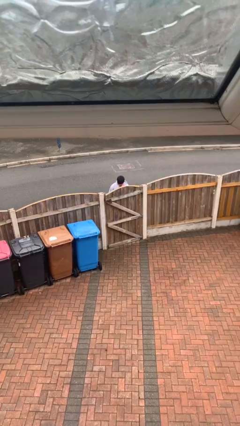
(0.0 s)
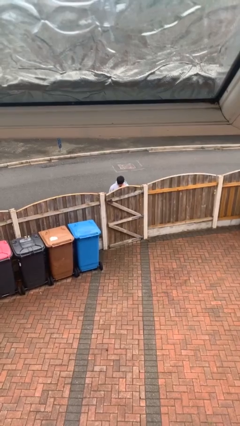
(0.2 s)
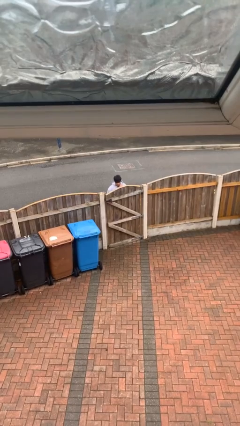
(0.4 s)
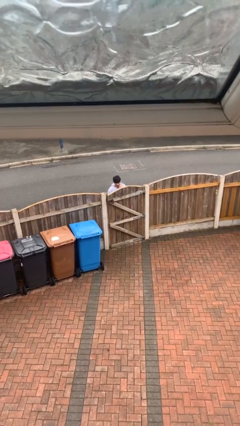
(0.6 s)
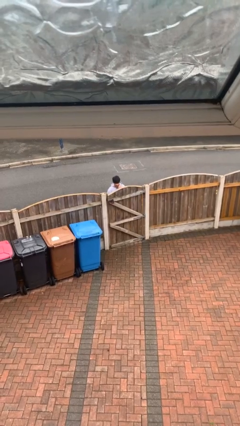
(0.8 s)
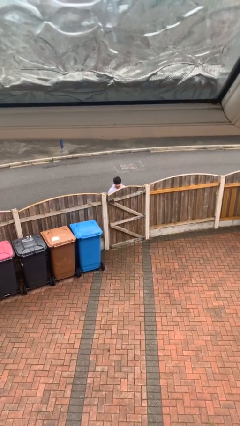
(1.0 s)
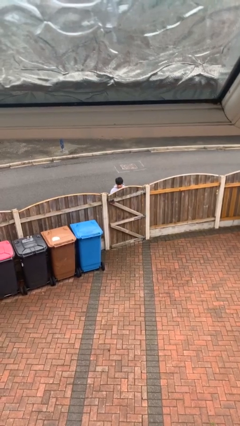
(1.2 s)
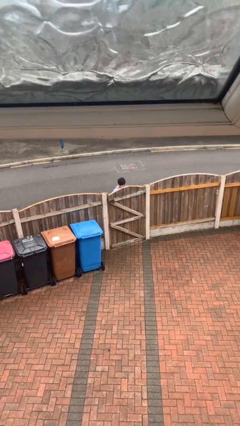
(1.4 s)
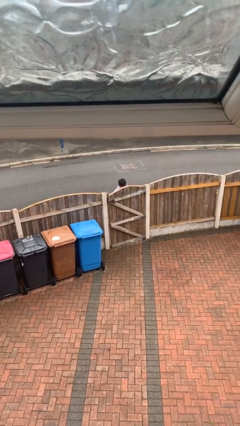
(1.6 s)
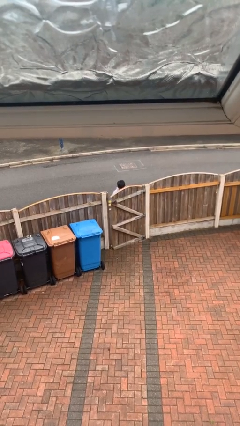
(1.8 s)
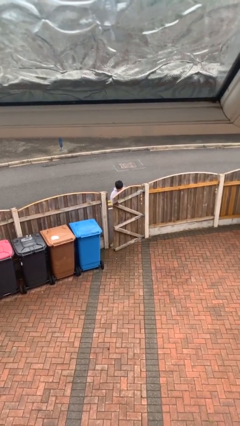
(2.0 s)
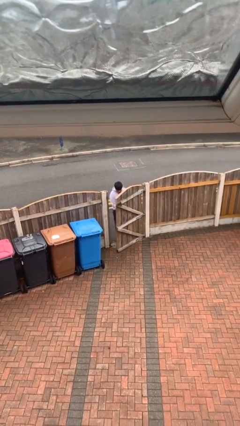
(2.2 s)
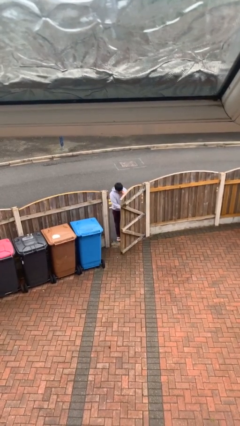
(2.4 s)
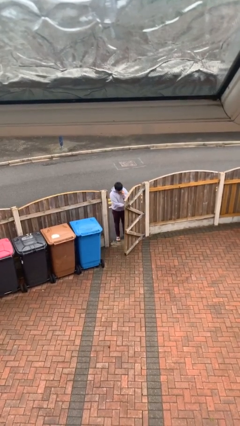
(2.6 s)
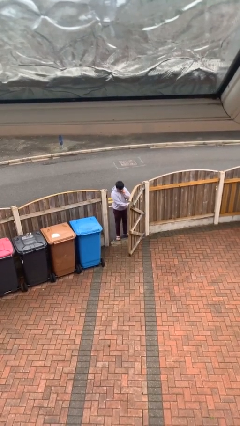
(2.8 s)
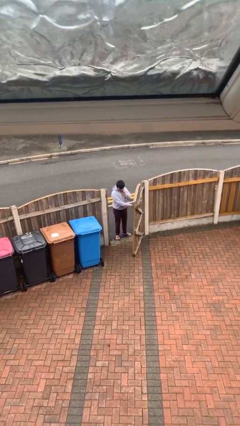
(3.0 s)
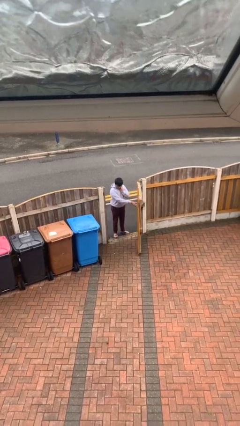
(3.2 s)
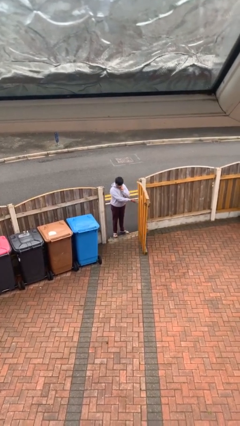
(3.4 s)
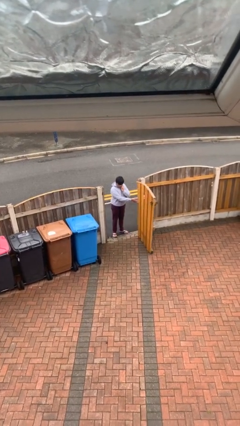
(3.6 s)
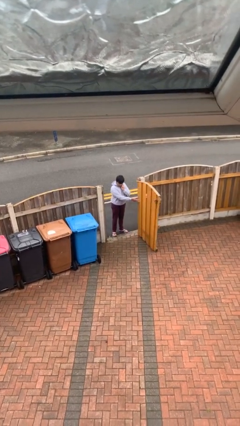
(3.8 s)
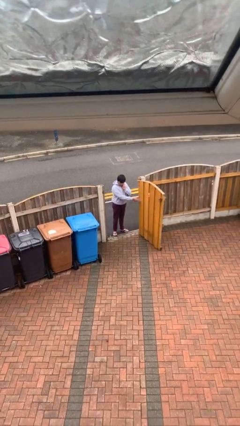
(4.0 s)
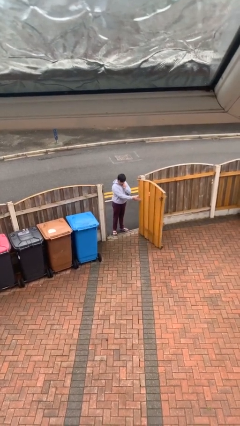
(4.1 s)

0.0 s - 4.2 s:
person opens facility door

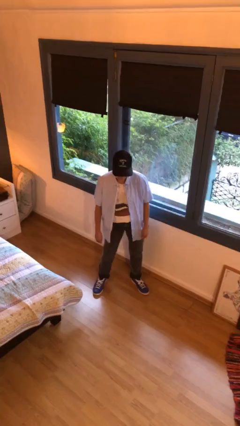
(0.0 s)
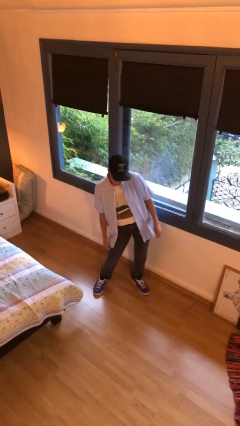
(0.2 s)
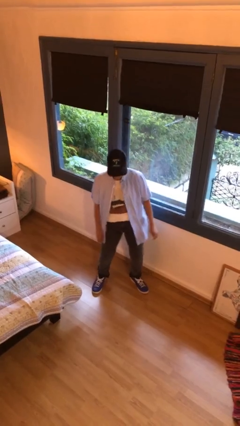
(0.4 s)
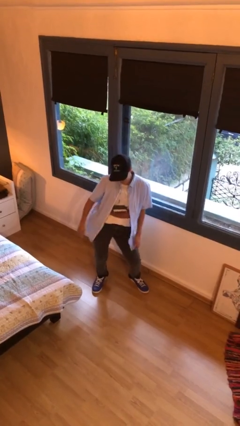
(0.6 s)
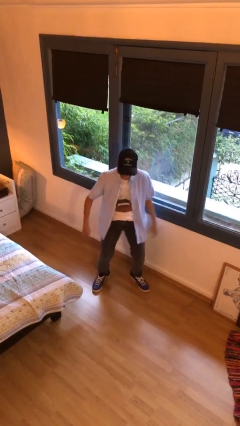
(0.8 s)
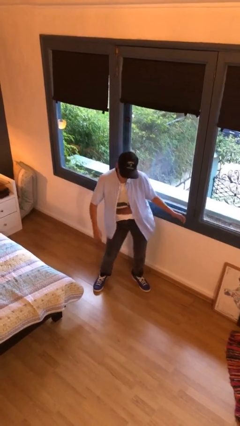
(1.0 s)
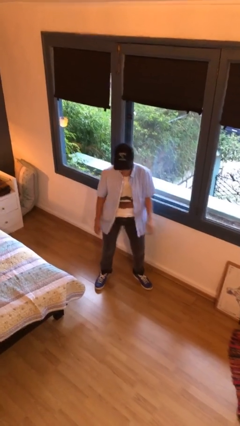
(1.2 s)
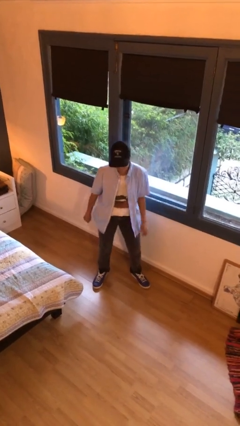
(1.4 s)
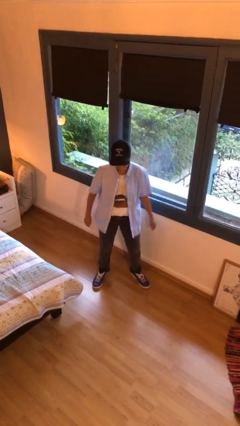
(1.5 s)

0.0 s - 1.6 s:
person wiggles hips

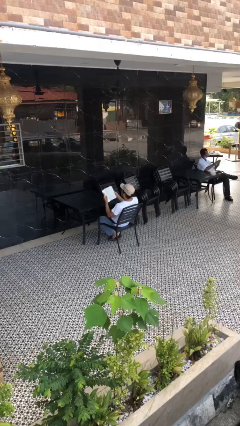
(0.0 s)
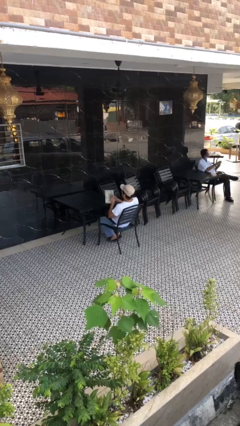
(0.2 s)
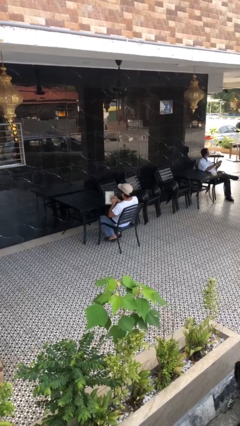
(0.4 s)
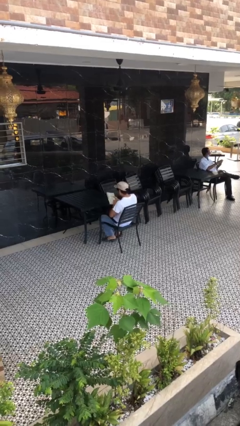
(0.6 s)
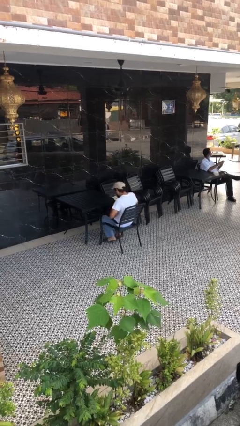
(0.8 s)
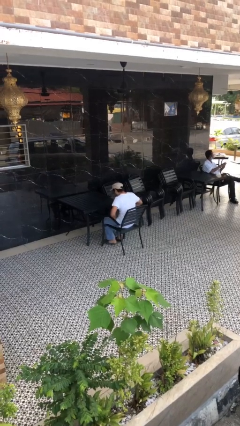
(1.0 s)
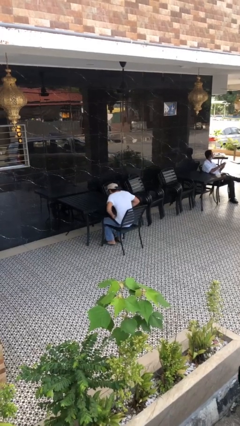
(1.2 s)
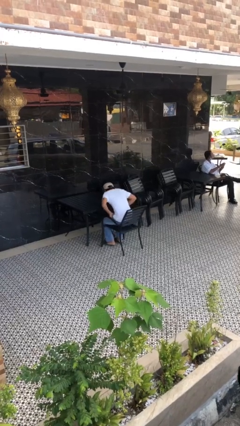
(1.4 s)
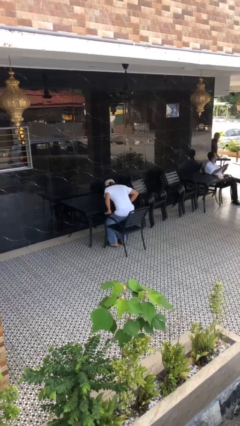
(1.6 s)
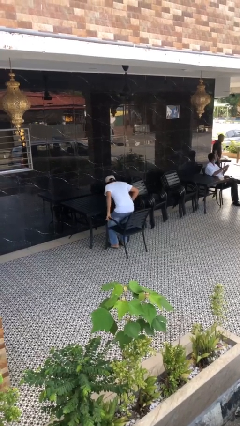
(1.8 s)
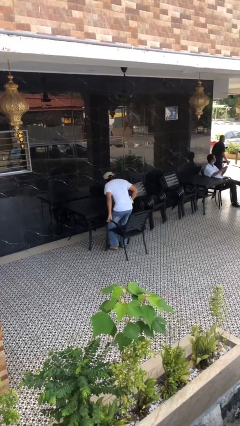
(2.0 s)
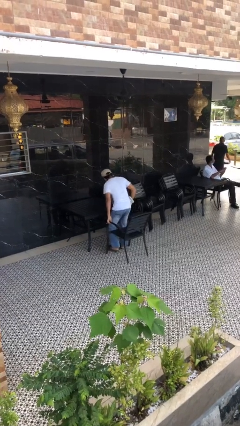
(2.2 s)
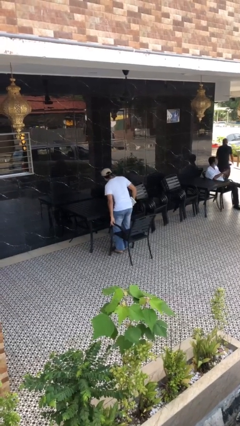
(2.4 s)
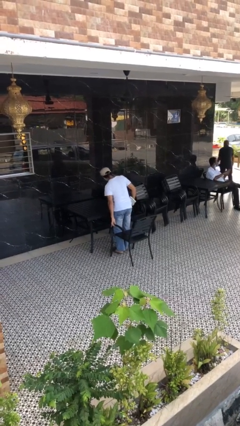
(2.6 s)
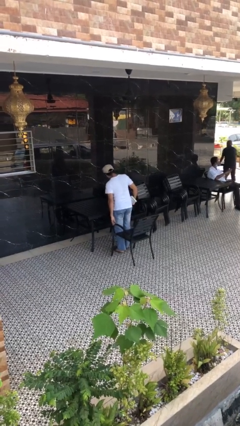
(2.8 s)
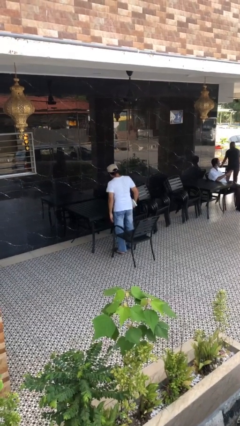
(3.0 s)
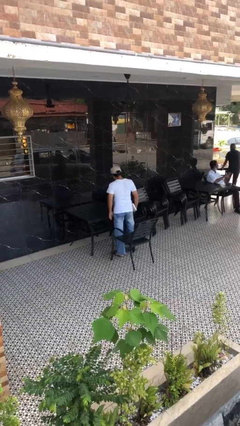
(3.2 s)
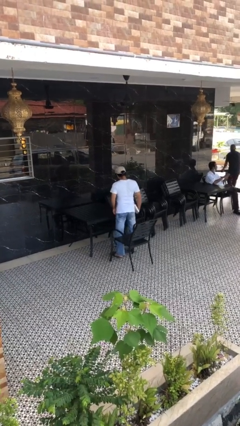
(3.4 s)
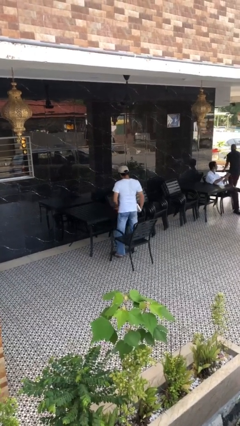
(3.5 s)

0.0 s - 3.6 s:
person stands up

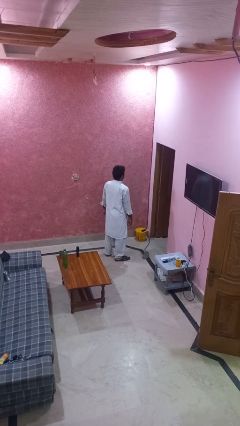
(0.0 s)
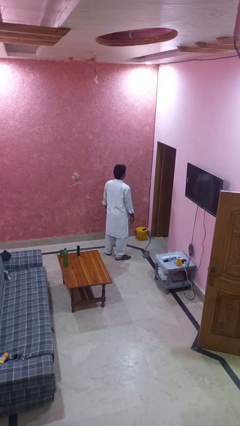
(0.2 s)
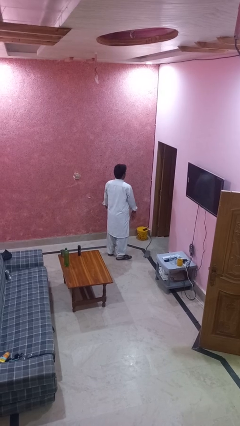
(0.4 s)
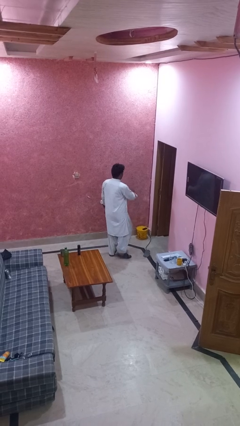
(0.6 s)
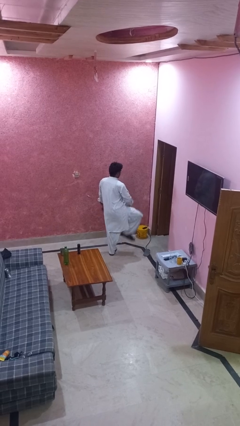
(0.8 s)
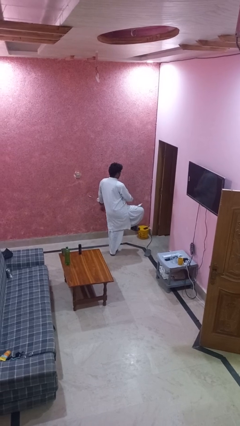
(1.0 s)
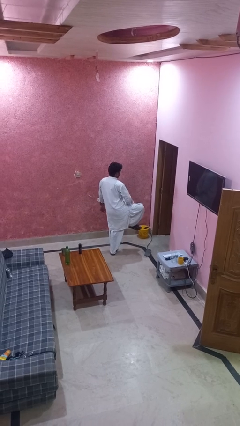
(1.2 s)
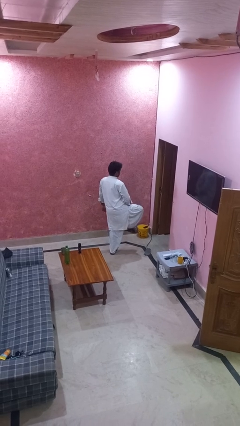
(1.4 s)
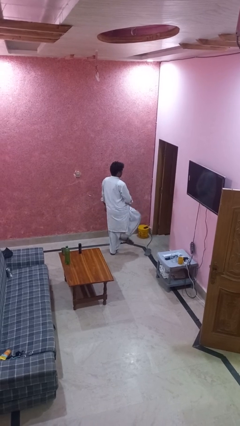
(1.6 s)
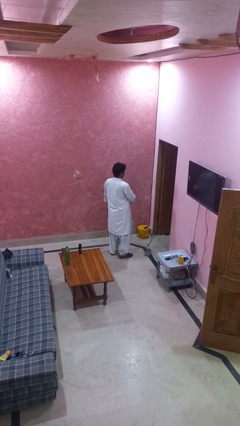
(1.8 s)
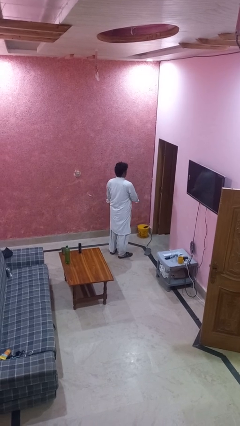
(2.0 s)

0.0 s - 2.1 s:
person slaps hands on thighs

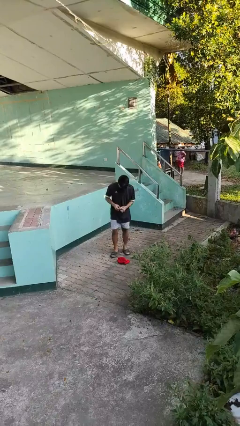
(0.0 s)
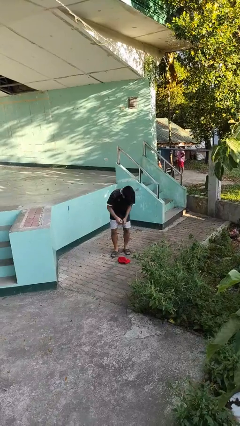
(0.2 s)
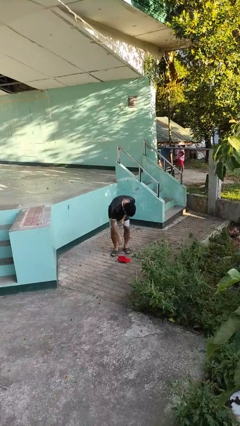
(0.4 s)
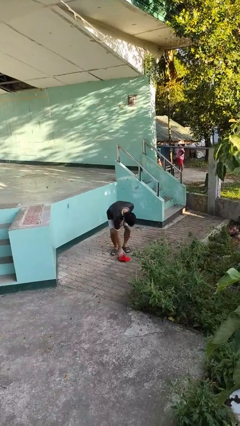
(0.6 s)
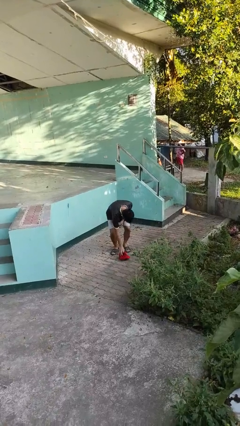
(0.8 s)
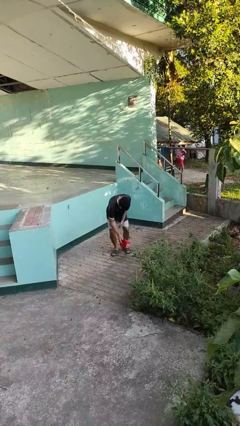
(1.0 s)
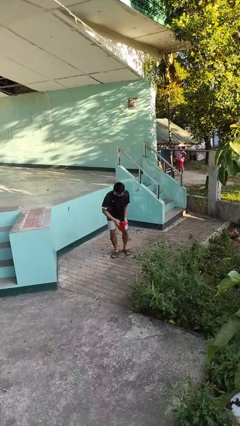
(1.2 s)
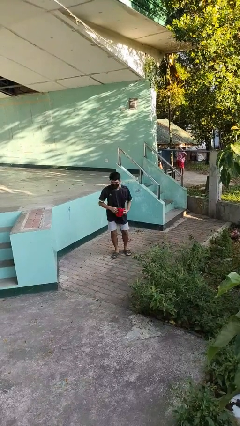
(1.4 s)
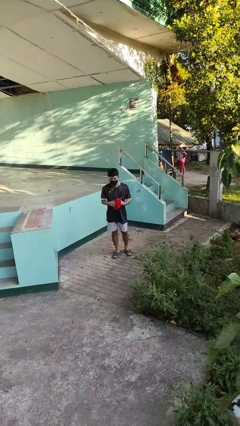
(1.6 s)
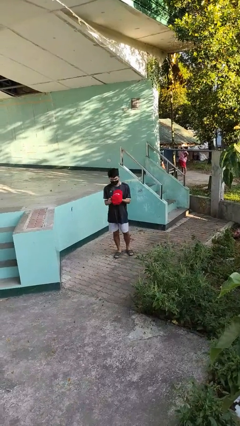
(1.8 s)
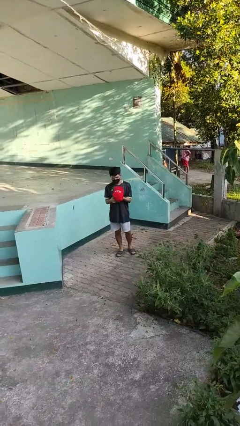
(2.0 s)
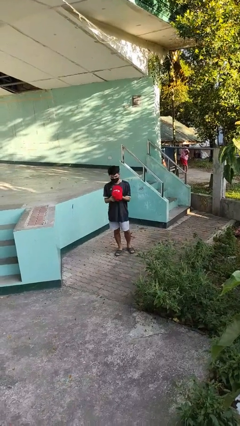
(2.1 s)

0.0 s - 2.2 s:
person picks up object from floor

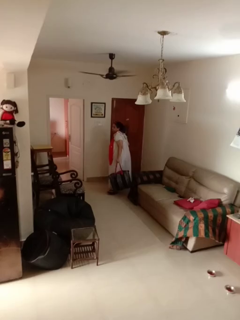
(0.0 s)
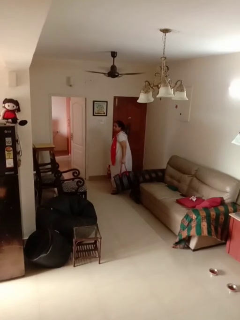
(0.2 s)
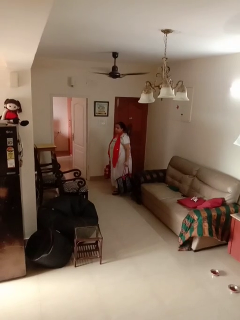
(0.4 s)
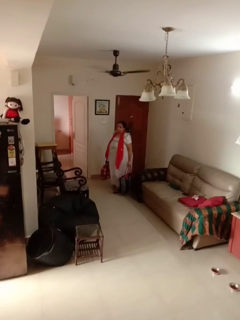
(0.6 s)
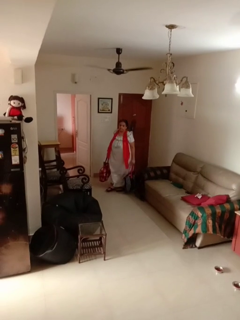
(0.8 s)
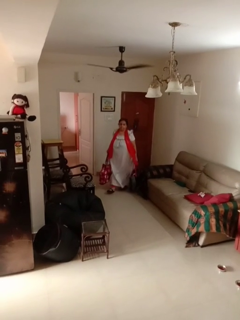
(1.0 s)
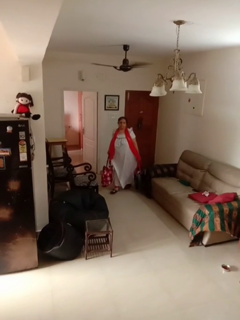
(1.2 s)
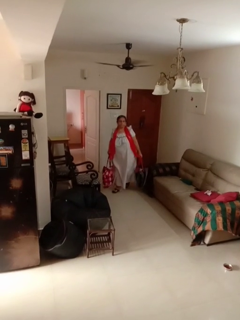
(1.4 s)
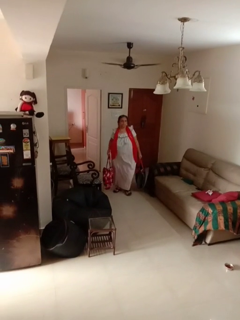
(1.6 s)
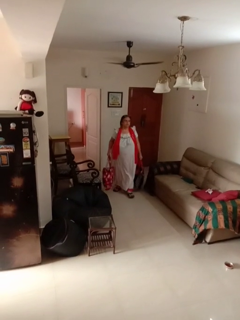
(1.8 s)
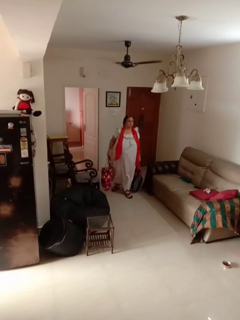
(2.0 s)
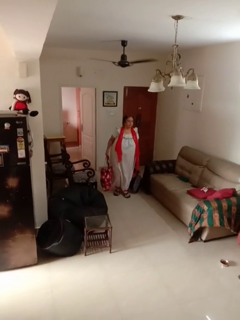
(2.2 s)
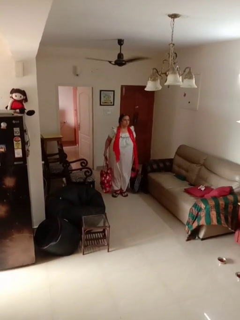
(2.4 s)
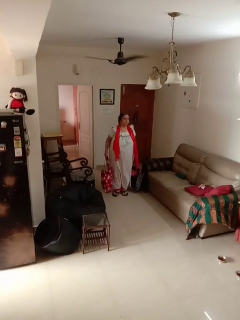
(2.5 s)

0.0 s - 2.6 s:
person carries groceries

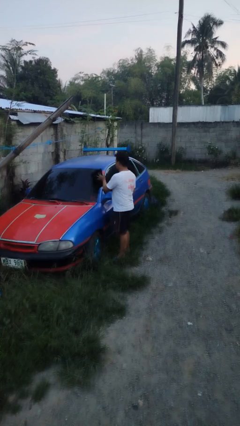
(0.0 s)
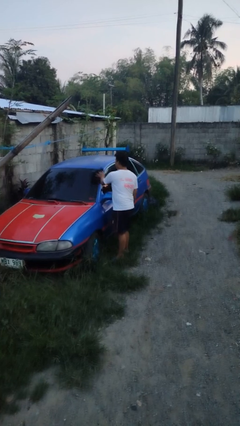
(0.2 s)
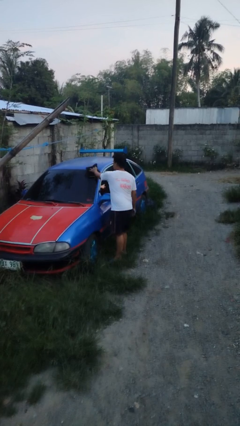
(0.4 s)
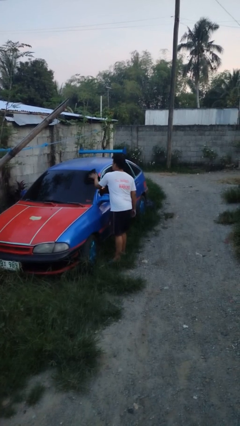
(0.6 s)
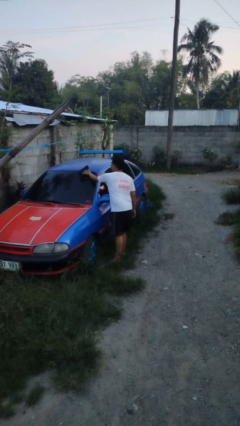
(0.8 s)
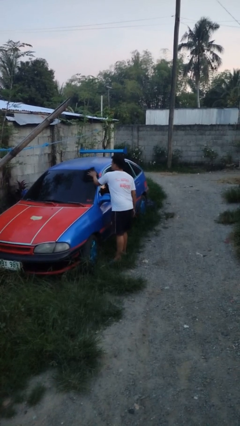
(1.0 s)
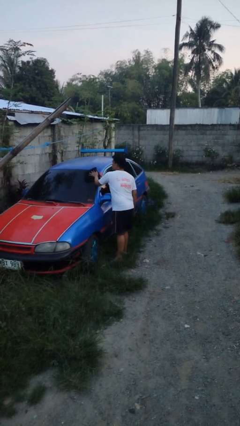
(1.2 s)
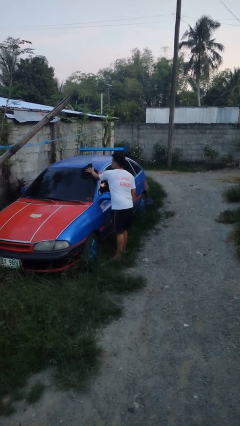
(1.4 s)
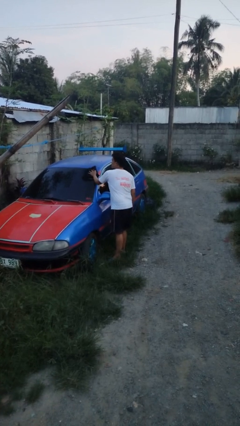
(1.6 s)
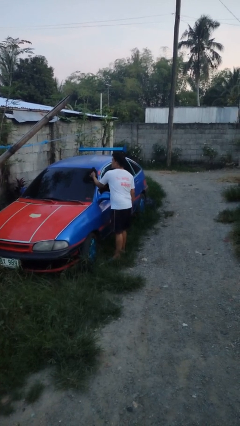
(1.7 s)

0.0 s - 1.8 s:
person polishes car with rag
